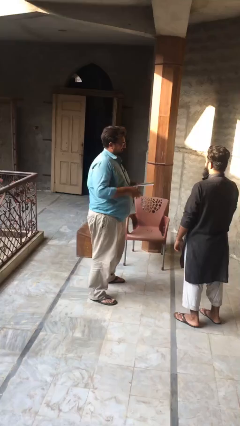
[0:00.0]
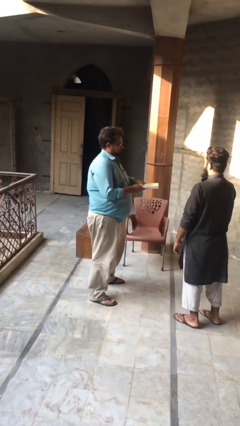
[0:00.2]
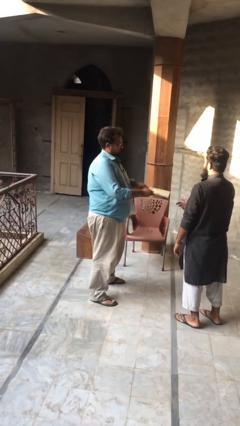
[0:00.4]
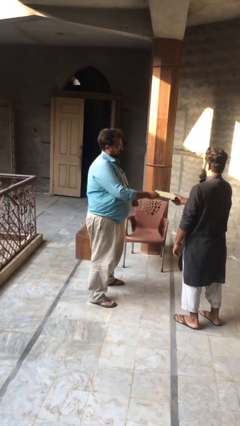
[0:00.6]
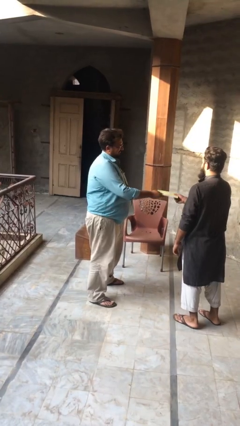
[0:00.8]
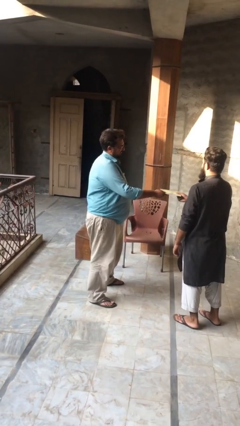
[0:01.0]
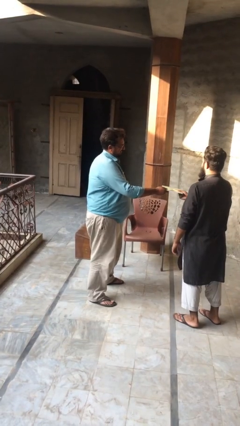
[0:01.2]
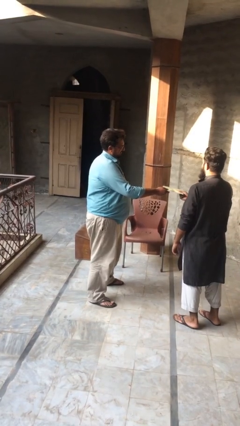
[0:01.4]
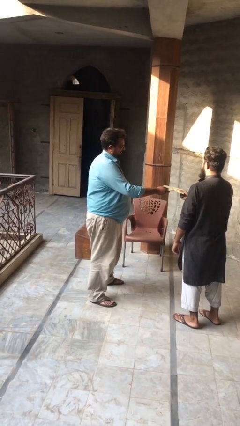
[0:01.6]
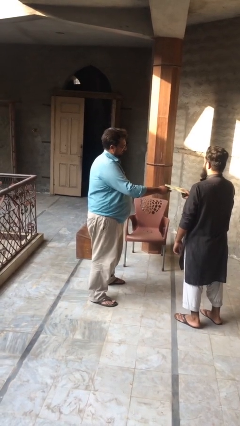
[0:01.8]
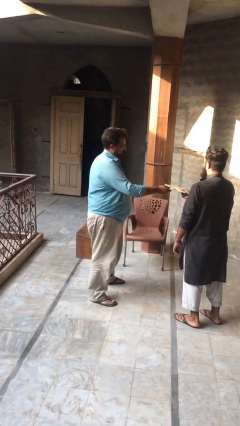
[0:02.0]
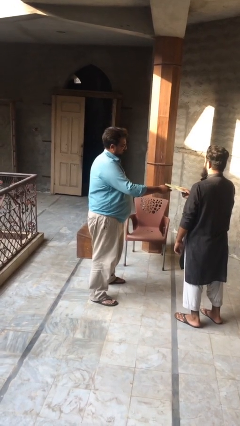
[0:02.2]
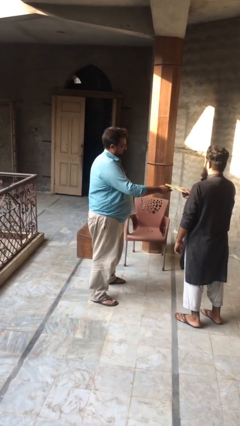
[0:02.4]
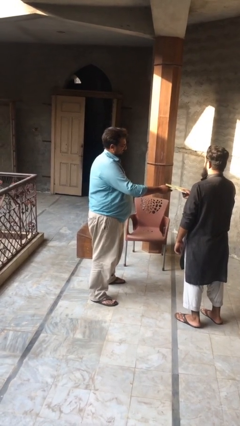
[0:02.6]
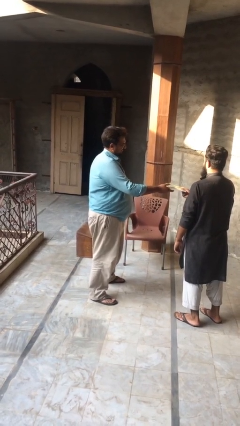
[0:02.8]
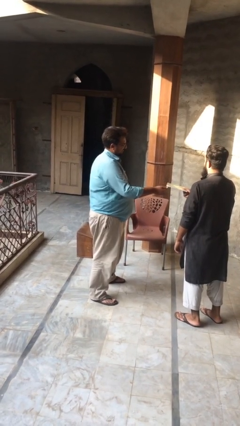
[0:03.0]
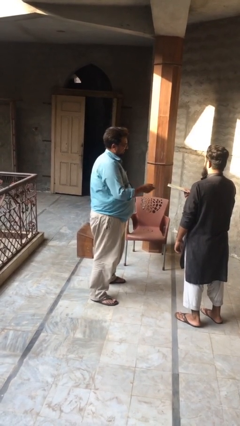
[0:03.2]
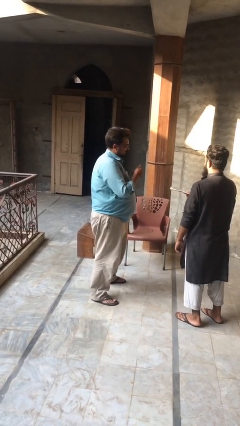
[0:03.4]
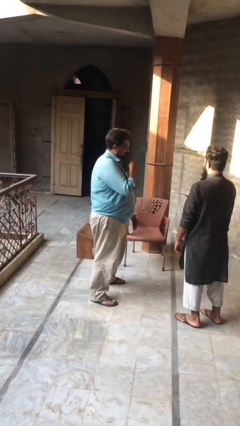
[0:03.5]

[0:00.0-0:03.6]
person transfers object to person

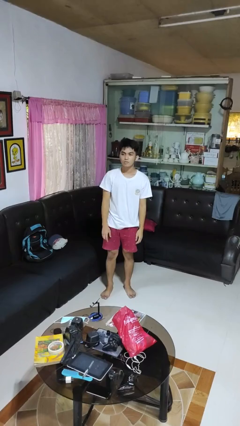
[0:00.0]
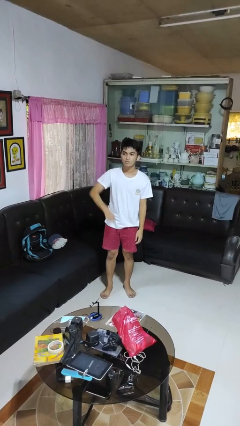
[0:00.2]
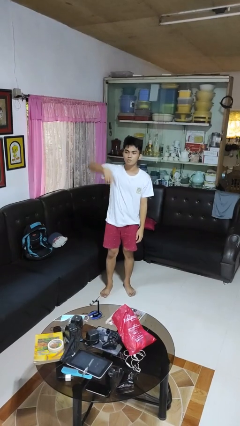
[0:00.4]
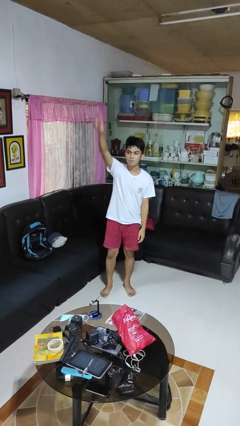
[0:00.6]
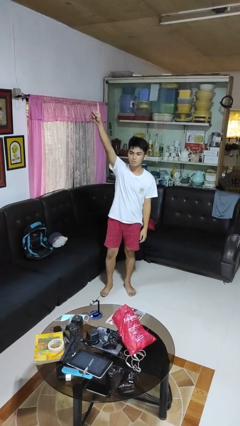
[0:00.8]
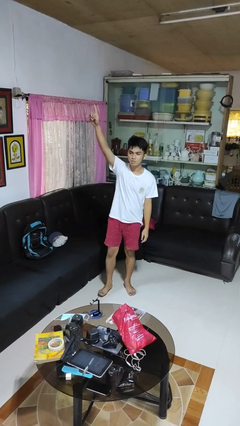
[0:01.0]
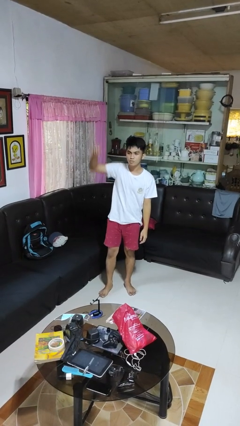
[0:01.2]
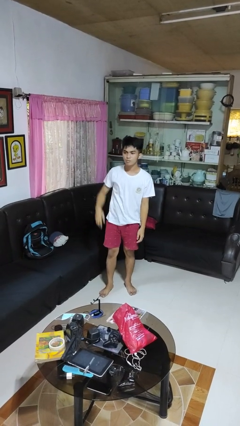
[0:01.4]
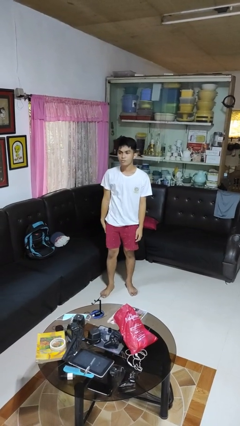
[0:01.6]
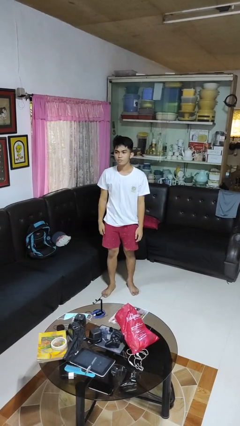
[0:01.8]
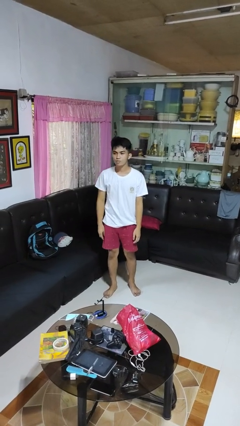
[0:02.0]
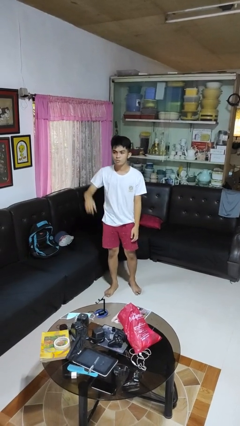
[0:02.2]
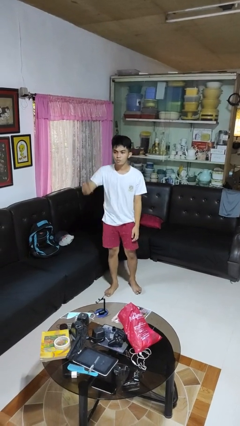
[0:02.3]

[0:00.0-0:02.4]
person gestures swipe up

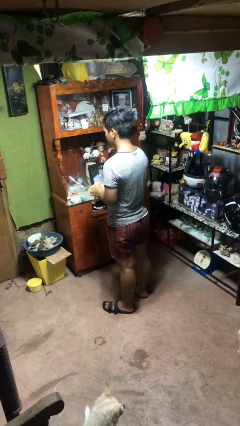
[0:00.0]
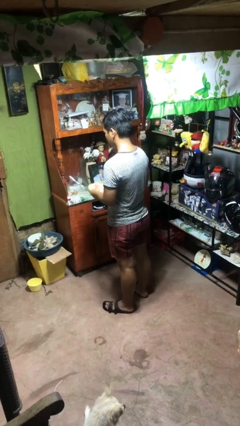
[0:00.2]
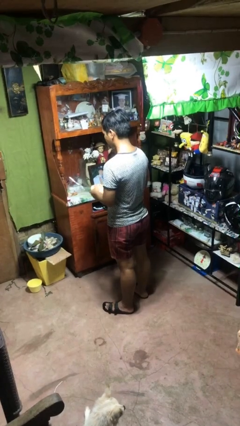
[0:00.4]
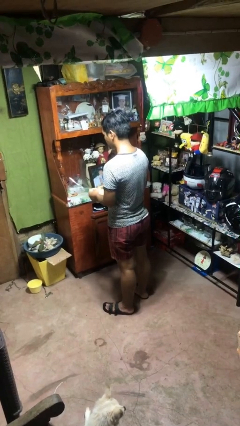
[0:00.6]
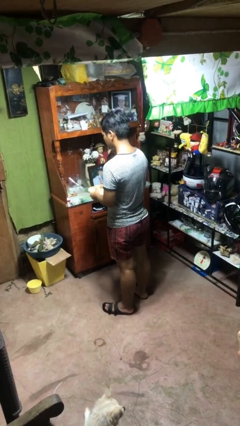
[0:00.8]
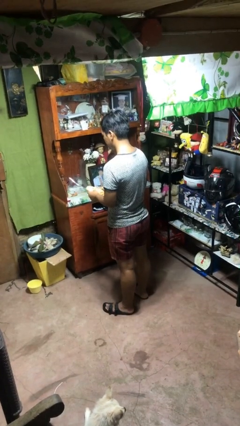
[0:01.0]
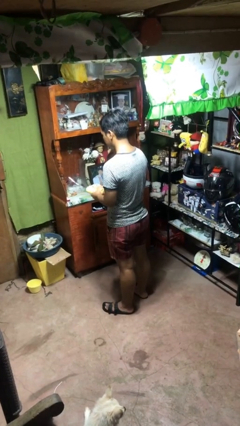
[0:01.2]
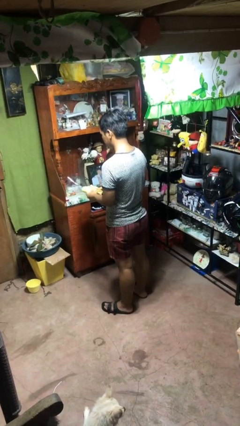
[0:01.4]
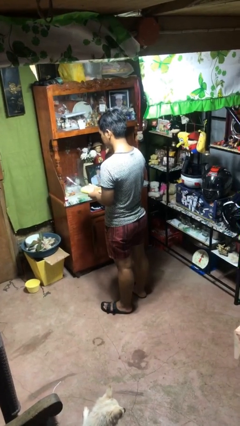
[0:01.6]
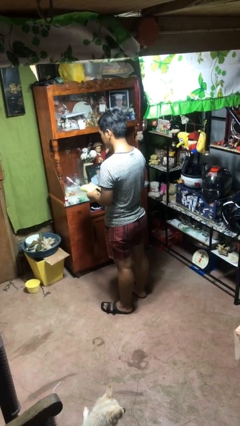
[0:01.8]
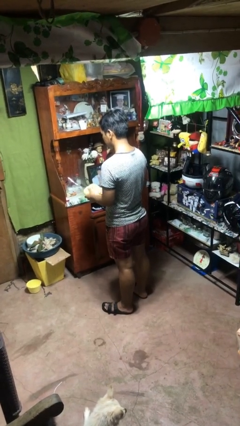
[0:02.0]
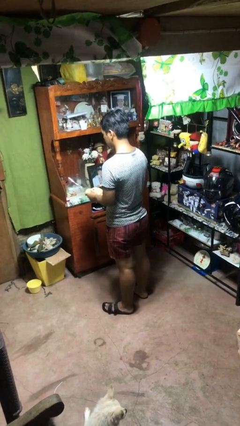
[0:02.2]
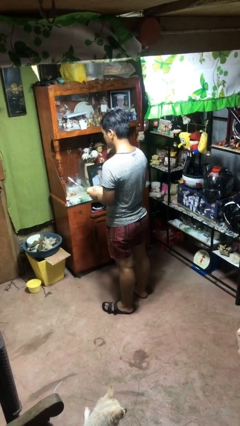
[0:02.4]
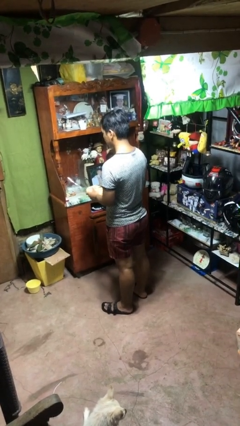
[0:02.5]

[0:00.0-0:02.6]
person squeezes object

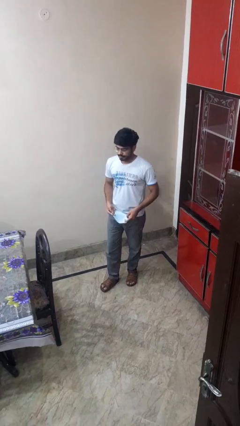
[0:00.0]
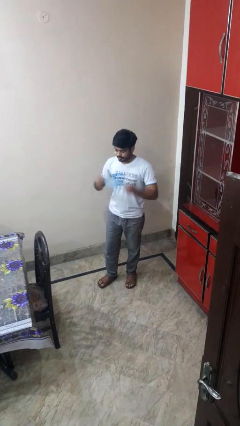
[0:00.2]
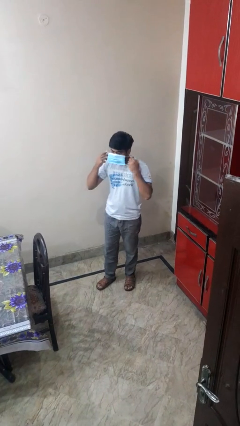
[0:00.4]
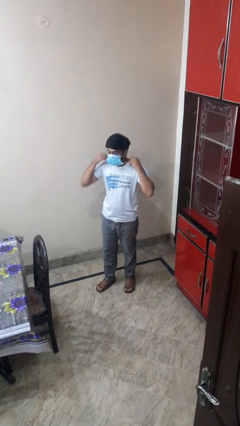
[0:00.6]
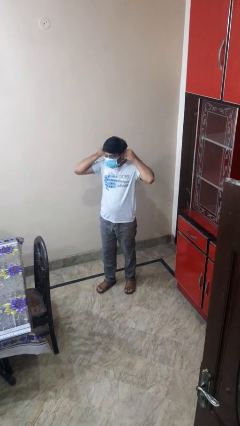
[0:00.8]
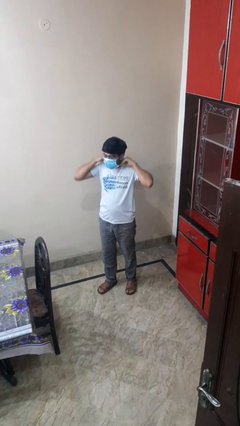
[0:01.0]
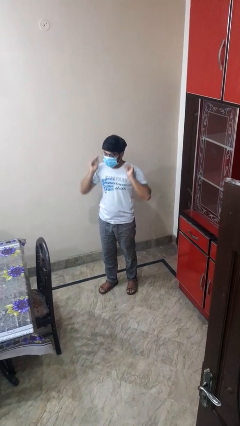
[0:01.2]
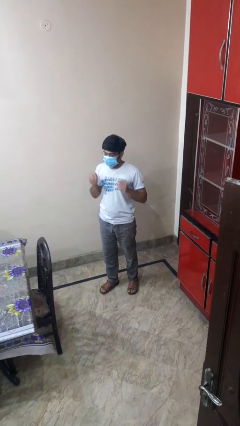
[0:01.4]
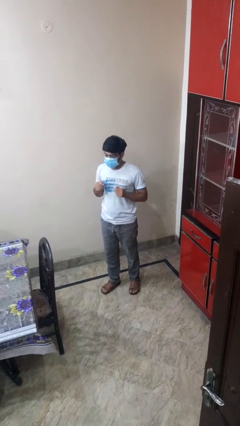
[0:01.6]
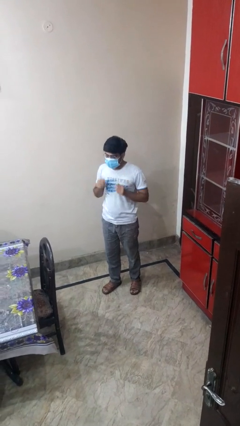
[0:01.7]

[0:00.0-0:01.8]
person puts on facemask

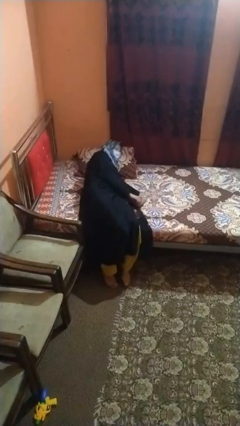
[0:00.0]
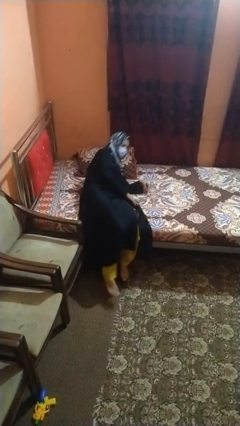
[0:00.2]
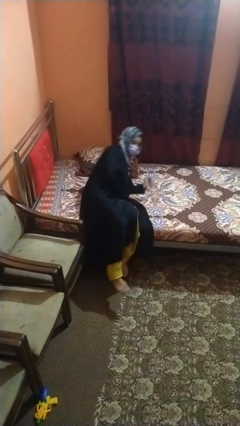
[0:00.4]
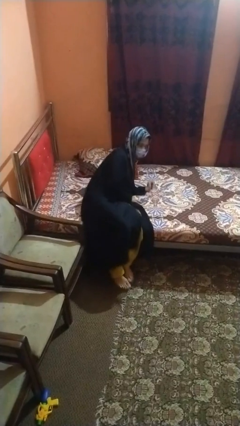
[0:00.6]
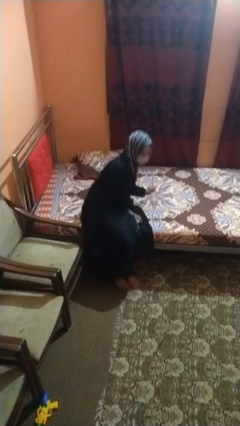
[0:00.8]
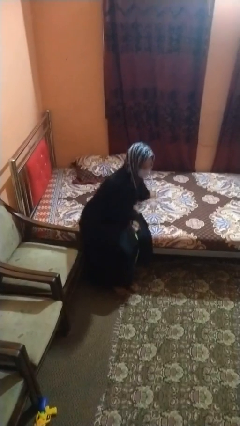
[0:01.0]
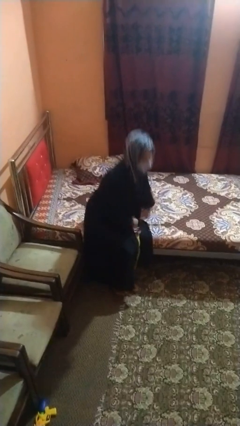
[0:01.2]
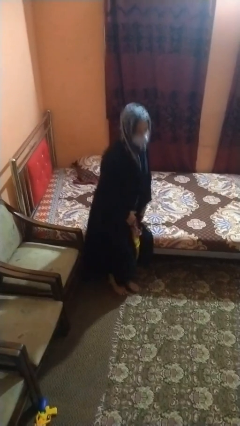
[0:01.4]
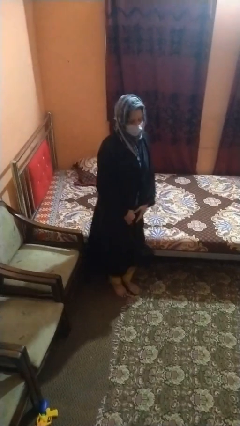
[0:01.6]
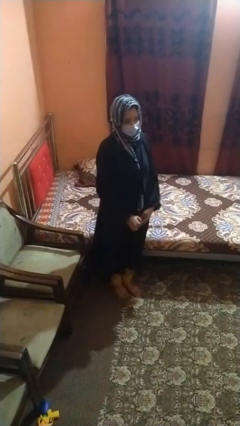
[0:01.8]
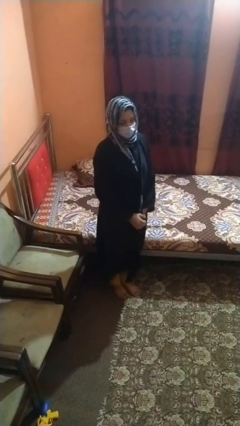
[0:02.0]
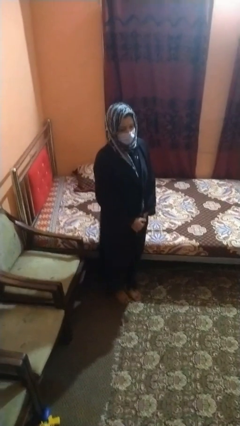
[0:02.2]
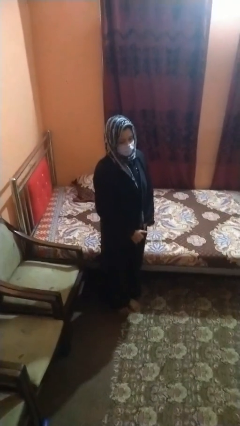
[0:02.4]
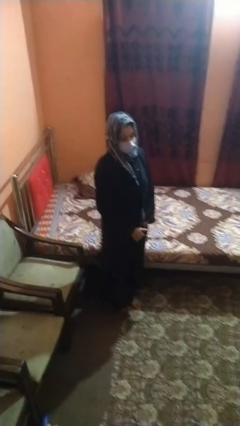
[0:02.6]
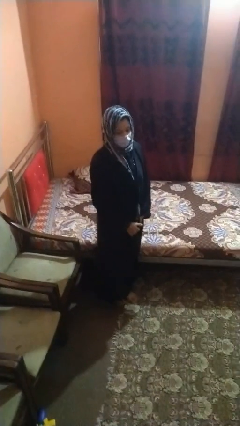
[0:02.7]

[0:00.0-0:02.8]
person stands up

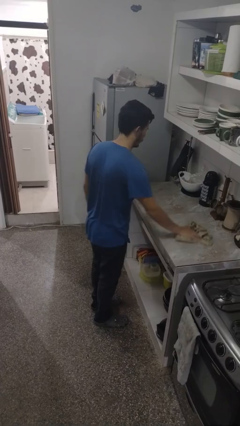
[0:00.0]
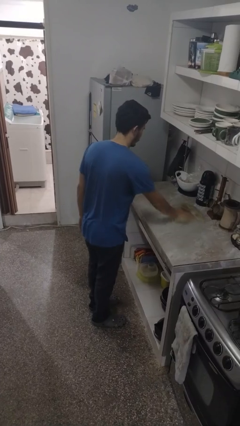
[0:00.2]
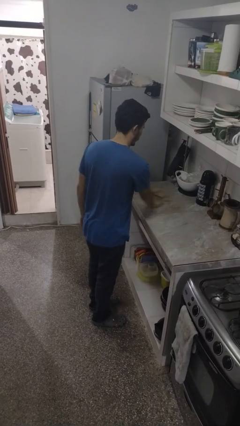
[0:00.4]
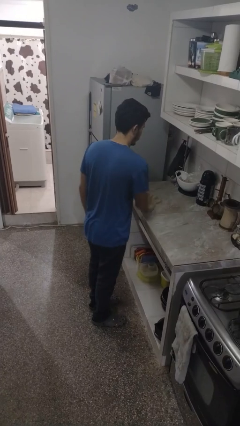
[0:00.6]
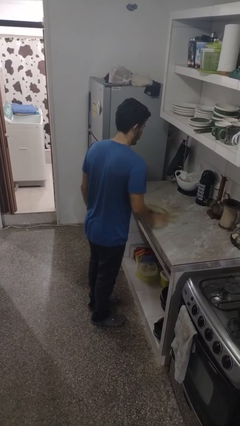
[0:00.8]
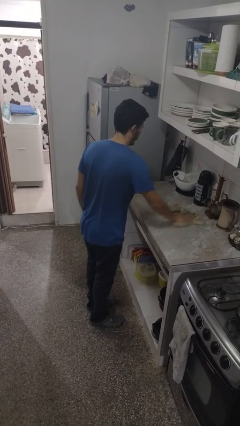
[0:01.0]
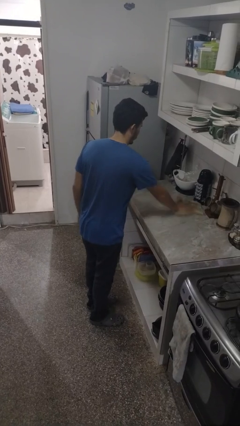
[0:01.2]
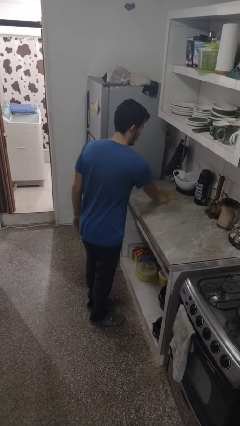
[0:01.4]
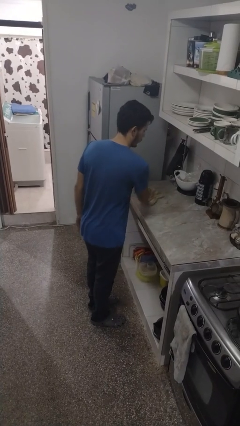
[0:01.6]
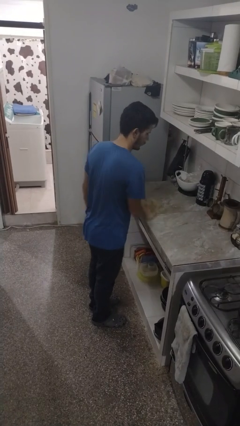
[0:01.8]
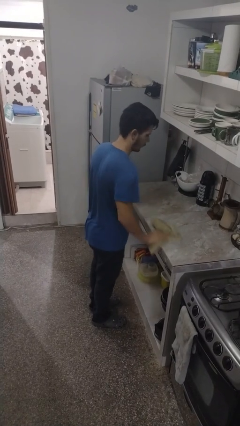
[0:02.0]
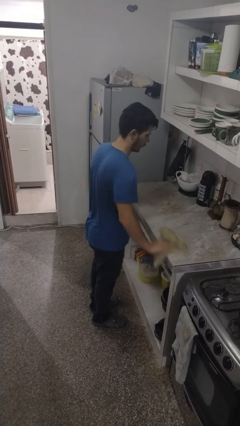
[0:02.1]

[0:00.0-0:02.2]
person cleans table with rag

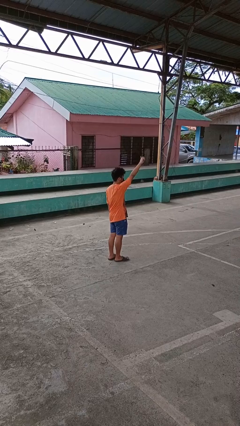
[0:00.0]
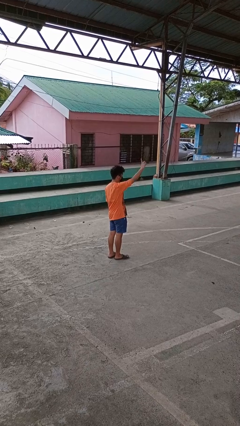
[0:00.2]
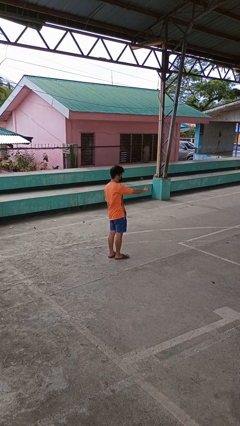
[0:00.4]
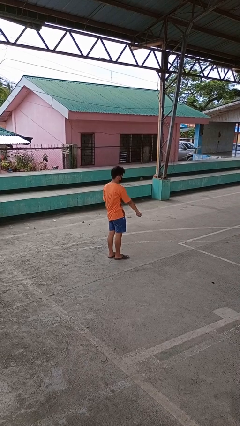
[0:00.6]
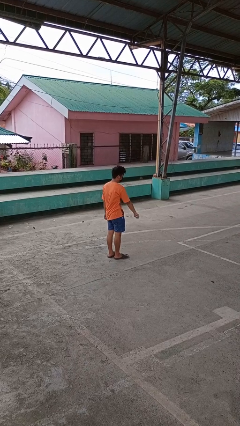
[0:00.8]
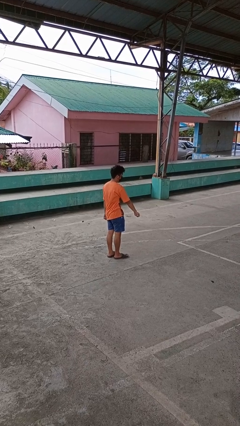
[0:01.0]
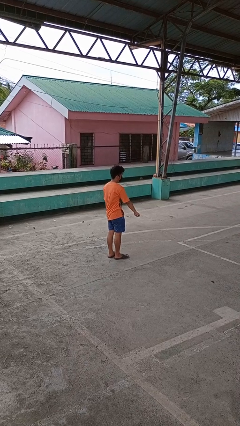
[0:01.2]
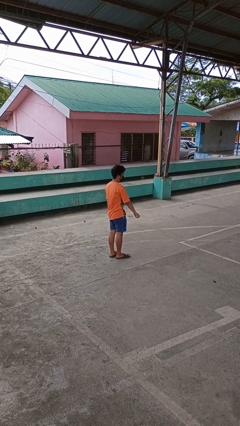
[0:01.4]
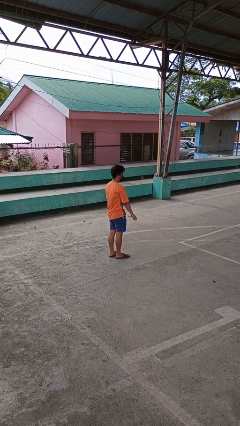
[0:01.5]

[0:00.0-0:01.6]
person gestures swipe down
